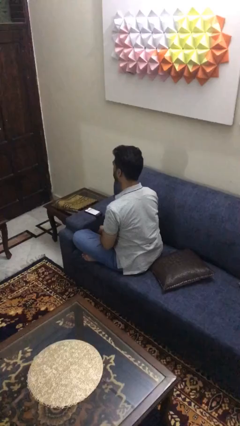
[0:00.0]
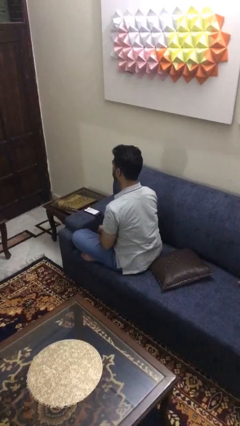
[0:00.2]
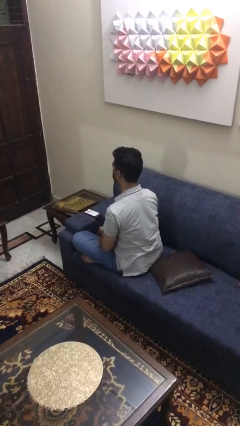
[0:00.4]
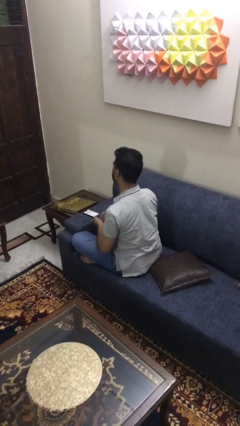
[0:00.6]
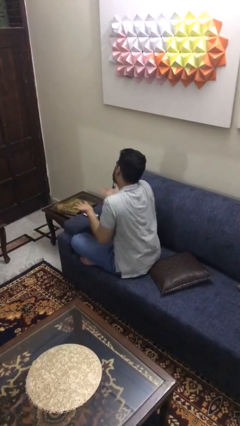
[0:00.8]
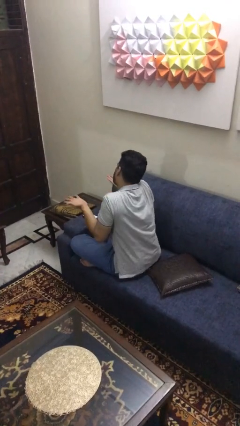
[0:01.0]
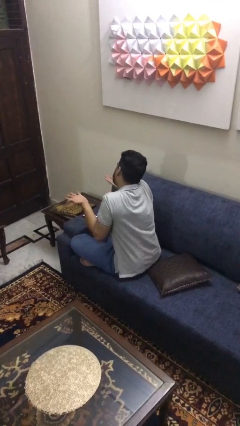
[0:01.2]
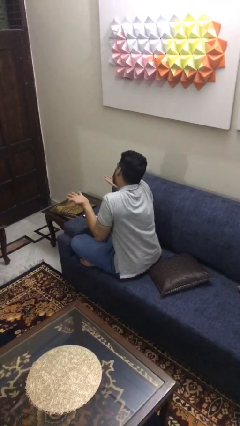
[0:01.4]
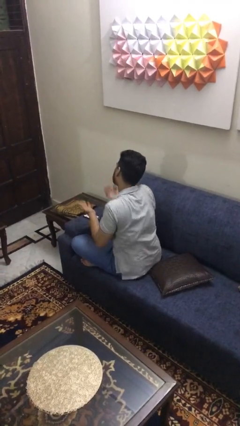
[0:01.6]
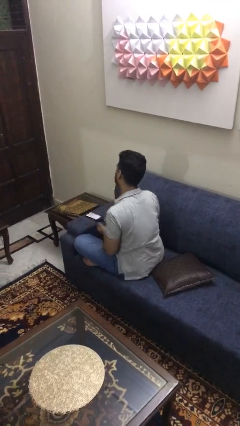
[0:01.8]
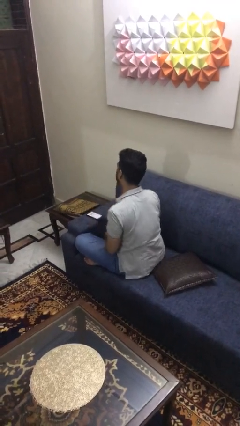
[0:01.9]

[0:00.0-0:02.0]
person shrugs

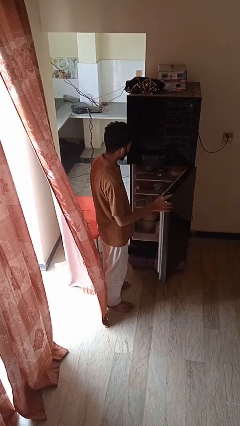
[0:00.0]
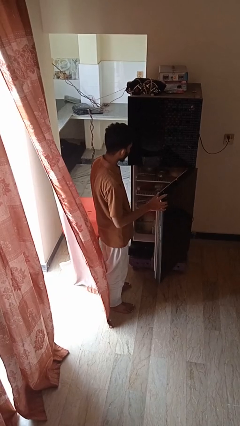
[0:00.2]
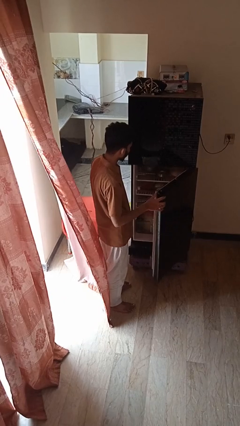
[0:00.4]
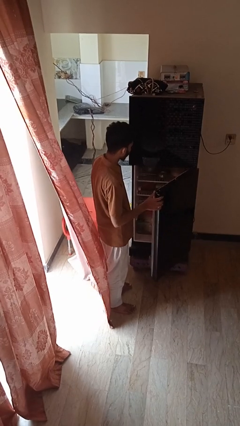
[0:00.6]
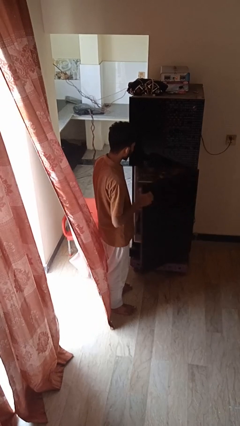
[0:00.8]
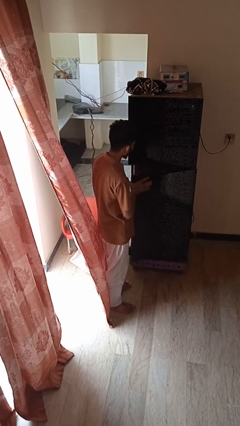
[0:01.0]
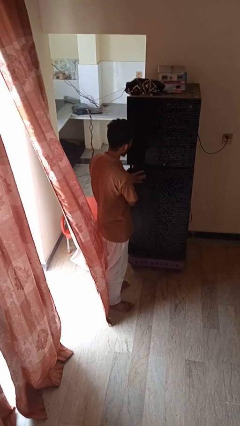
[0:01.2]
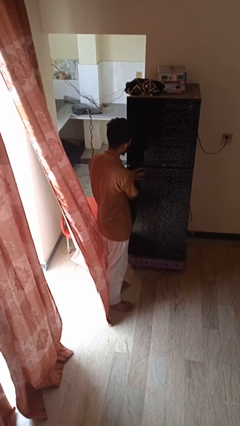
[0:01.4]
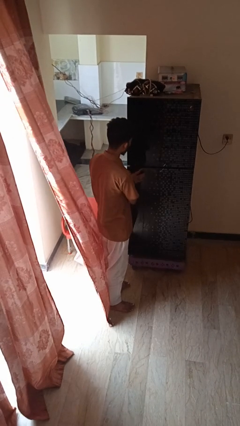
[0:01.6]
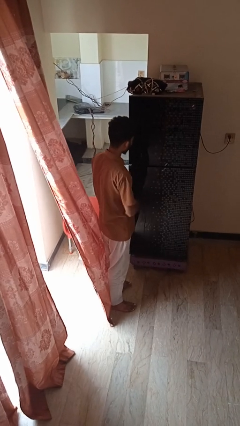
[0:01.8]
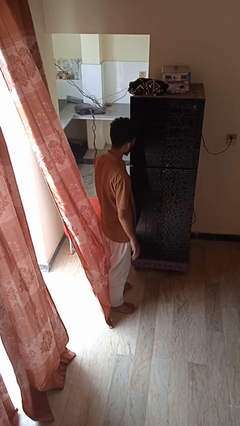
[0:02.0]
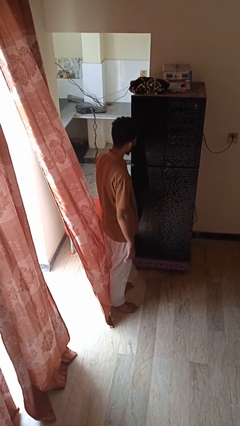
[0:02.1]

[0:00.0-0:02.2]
person closes refrigerator

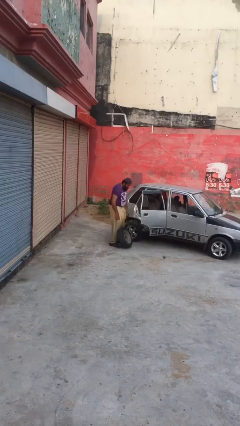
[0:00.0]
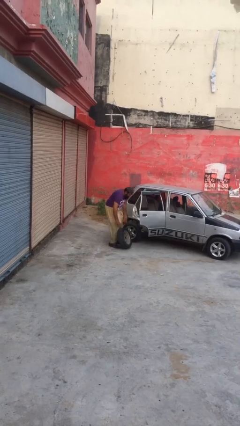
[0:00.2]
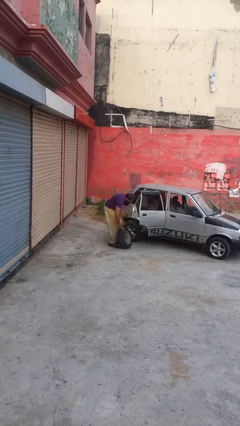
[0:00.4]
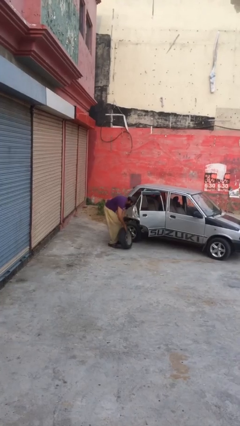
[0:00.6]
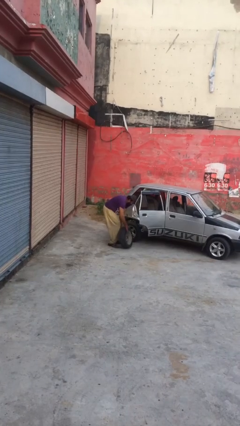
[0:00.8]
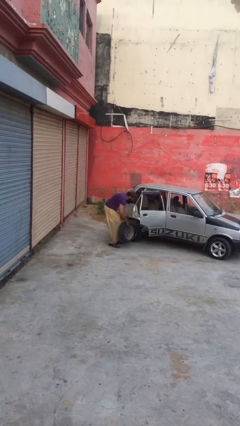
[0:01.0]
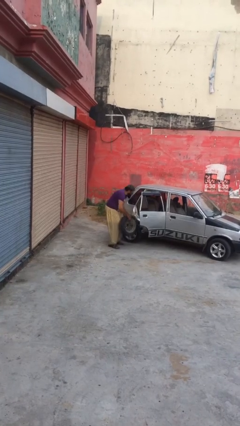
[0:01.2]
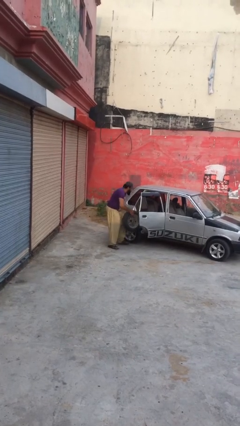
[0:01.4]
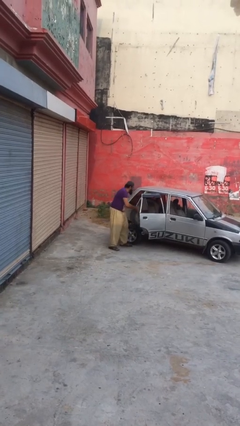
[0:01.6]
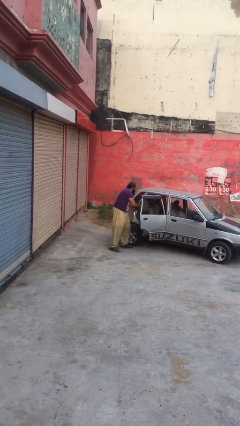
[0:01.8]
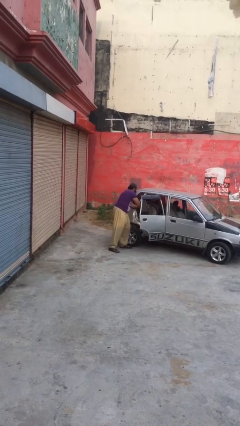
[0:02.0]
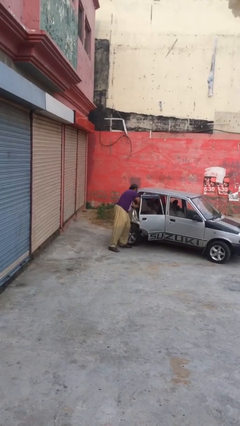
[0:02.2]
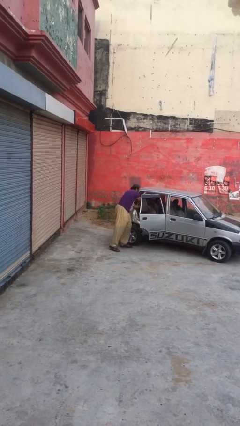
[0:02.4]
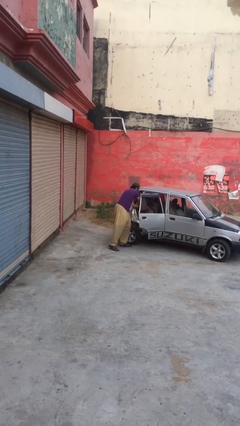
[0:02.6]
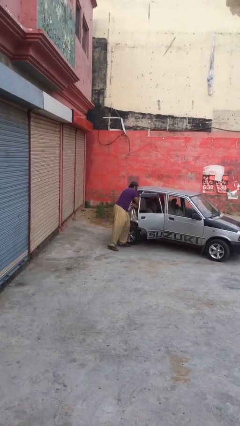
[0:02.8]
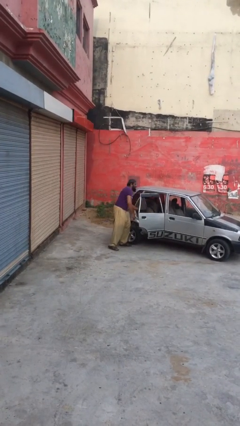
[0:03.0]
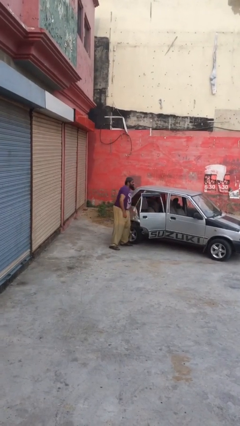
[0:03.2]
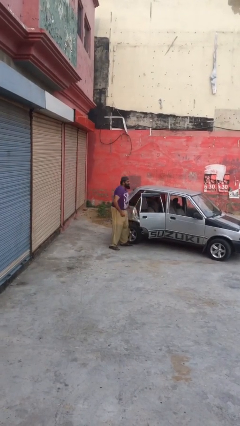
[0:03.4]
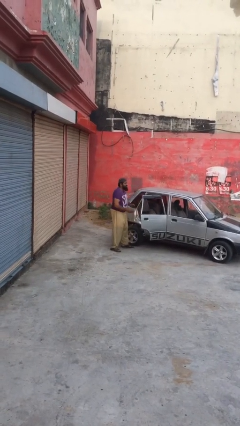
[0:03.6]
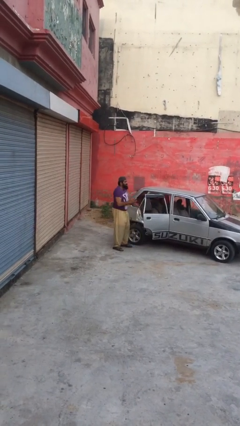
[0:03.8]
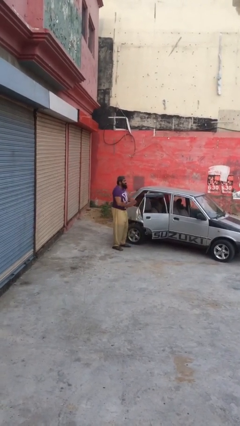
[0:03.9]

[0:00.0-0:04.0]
person loads car

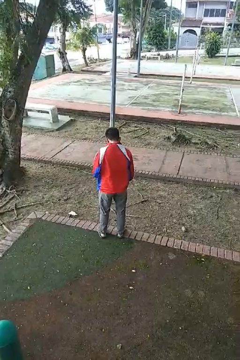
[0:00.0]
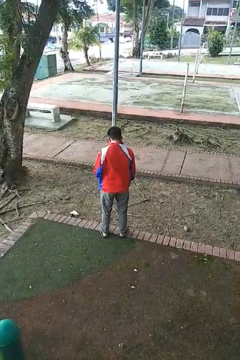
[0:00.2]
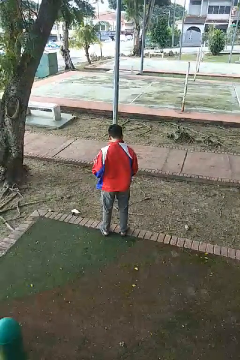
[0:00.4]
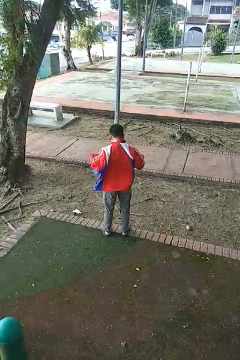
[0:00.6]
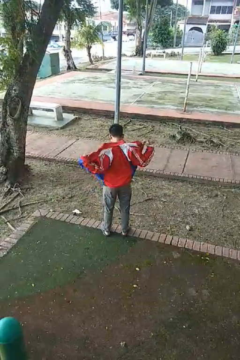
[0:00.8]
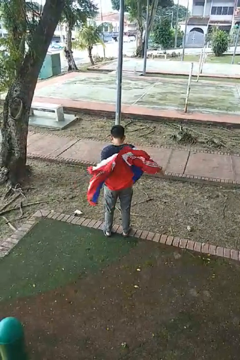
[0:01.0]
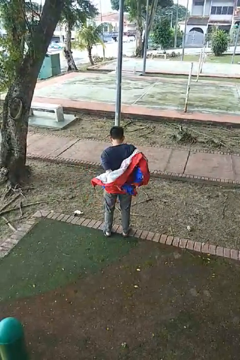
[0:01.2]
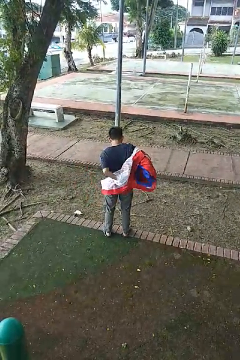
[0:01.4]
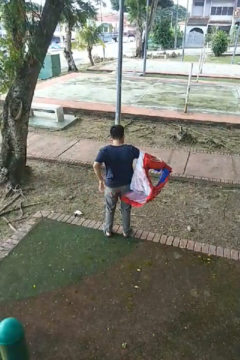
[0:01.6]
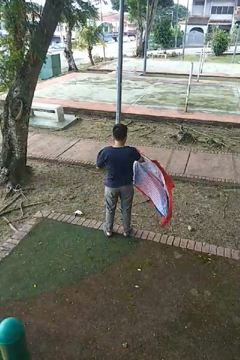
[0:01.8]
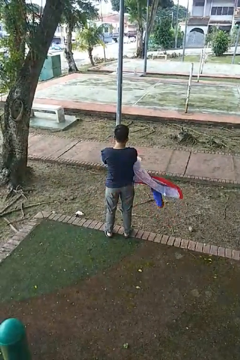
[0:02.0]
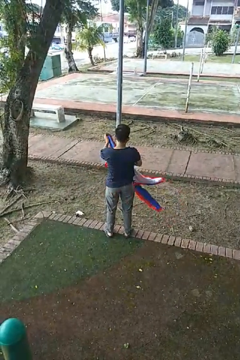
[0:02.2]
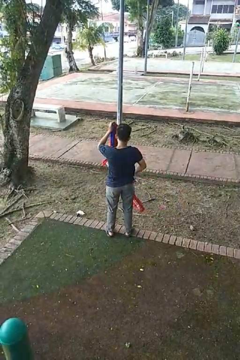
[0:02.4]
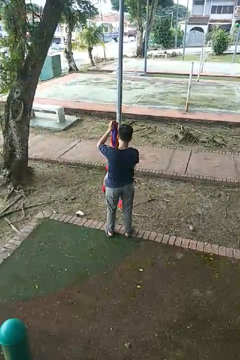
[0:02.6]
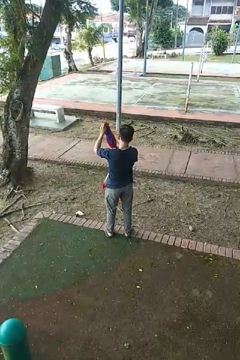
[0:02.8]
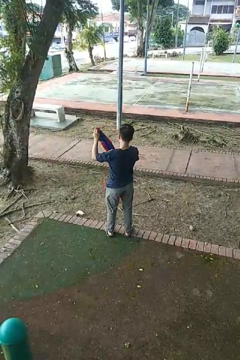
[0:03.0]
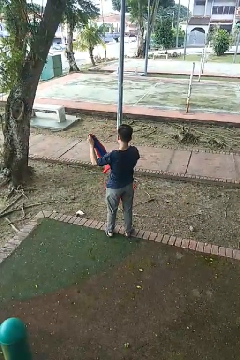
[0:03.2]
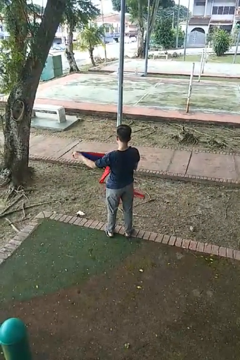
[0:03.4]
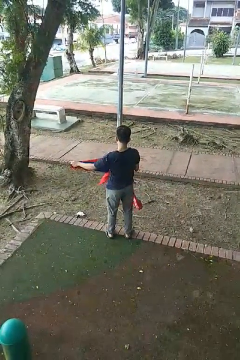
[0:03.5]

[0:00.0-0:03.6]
person takes off jacket

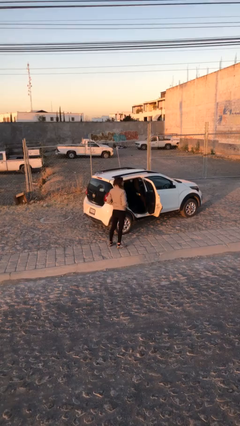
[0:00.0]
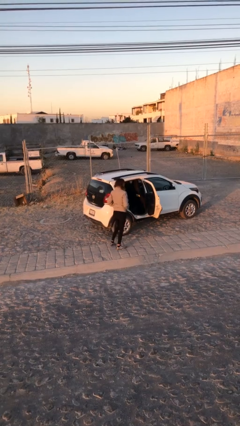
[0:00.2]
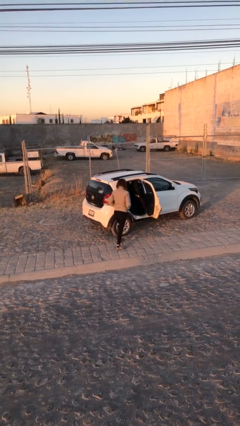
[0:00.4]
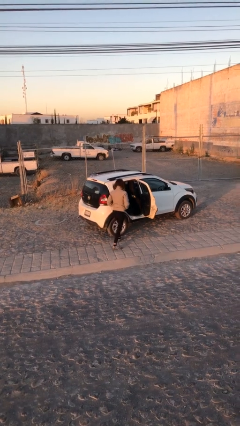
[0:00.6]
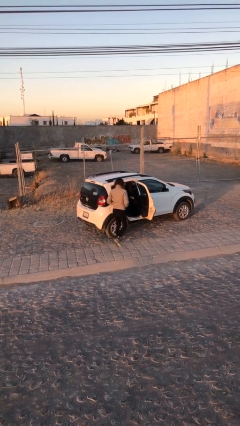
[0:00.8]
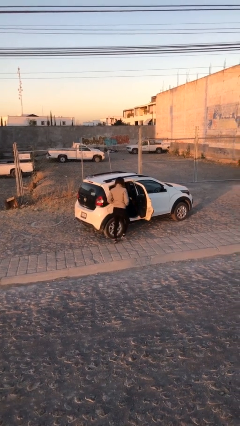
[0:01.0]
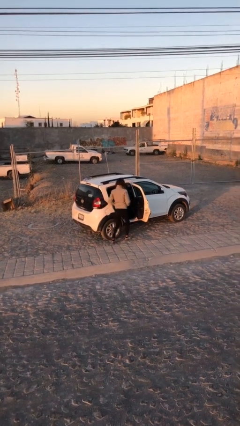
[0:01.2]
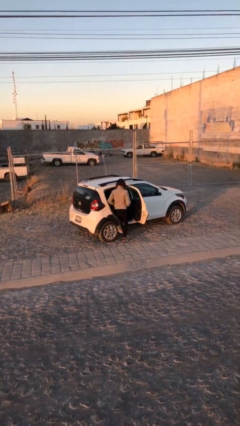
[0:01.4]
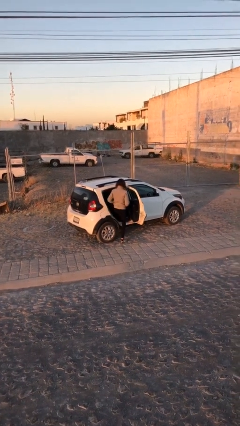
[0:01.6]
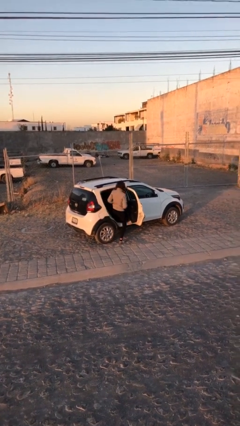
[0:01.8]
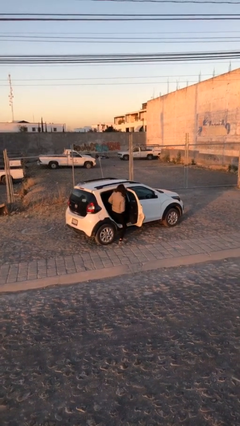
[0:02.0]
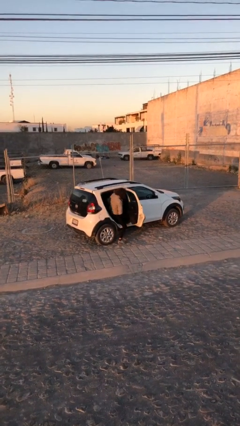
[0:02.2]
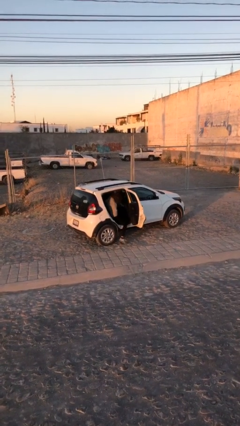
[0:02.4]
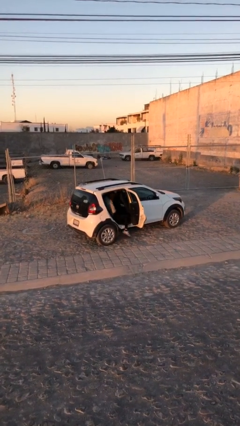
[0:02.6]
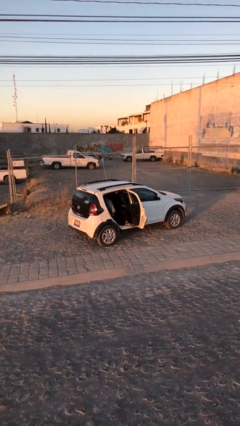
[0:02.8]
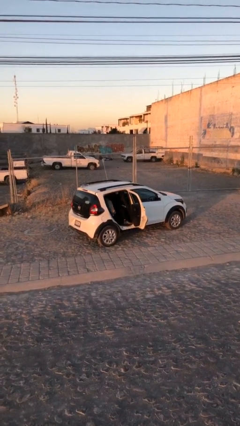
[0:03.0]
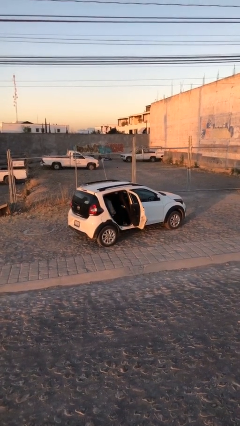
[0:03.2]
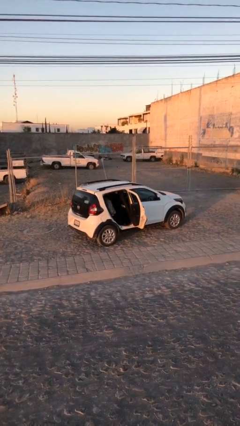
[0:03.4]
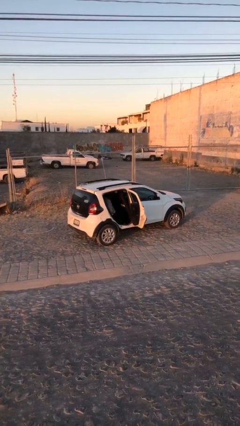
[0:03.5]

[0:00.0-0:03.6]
person enters car

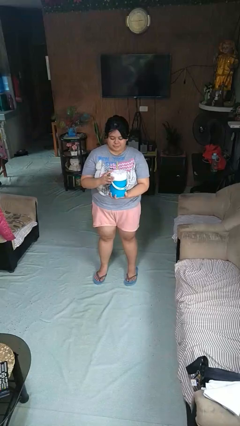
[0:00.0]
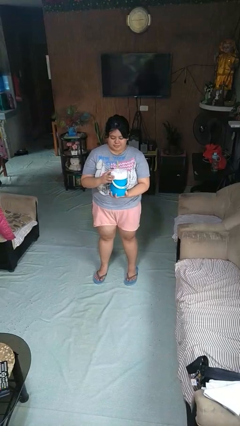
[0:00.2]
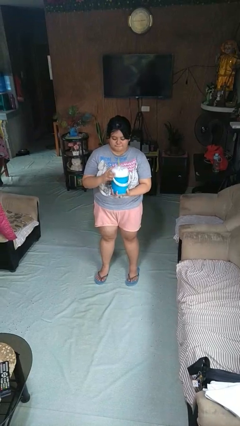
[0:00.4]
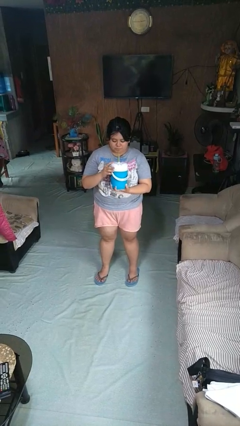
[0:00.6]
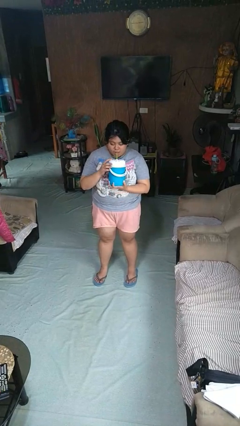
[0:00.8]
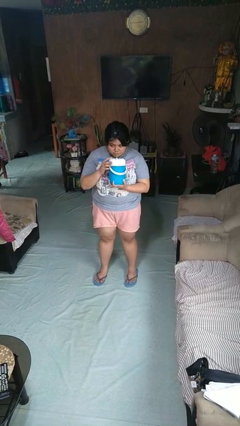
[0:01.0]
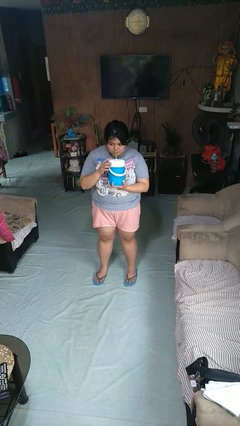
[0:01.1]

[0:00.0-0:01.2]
person drinks from straw

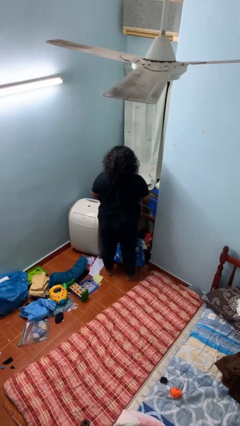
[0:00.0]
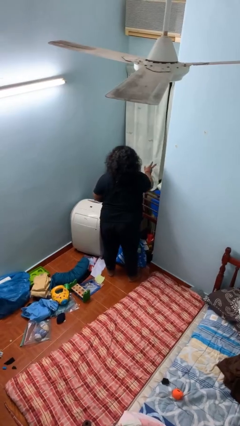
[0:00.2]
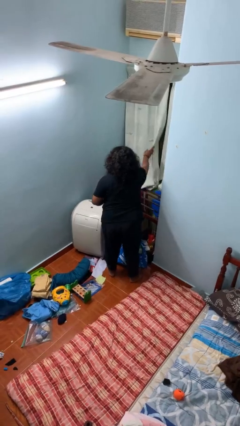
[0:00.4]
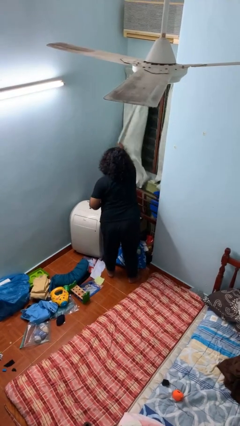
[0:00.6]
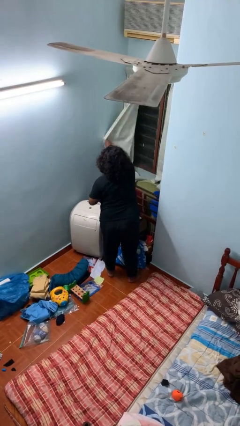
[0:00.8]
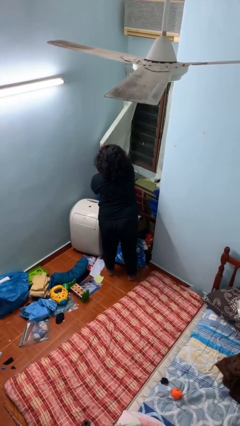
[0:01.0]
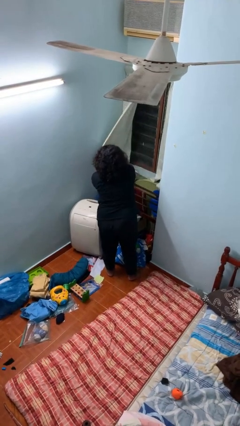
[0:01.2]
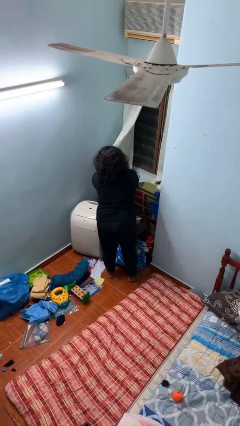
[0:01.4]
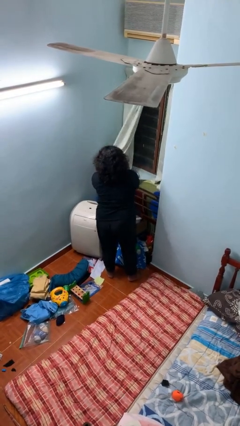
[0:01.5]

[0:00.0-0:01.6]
person opens curtains
